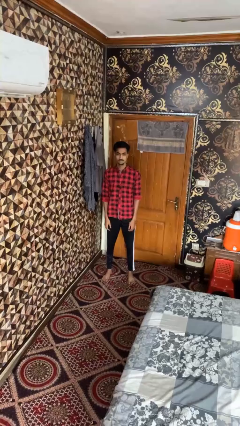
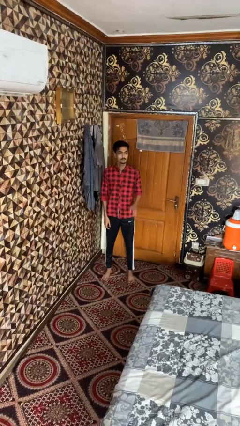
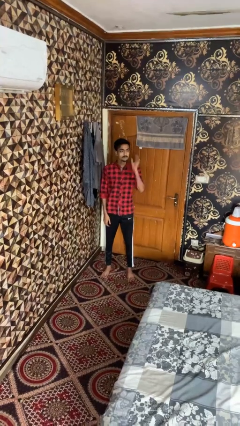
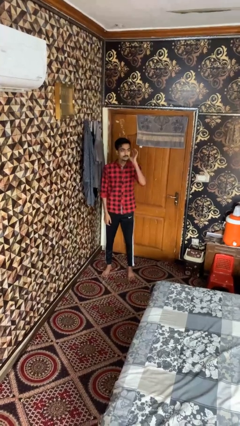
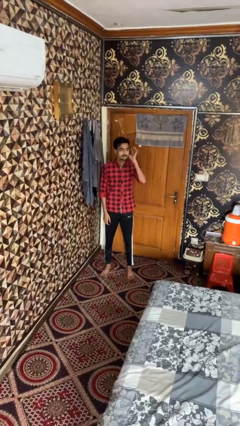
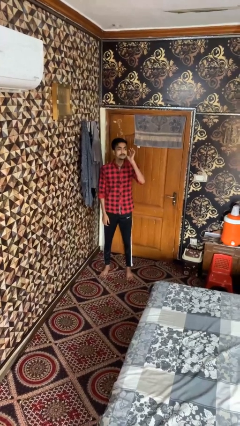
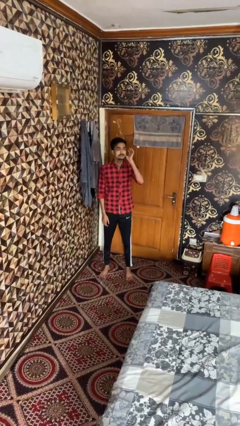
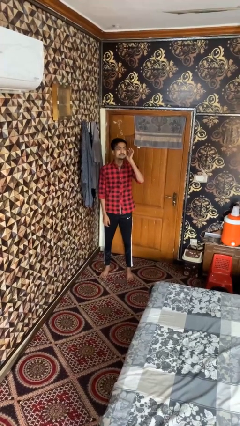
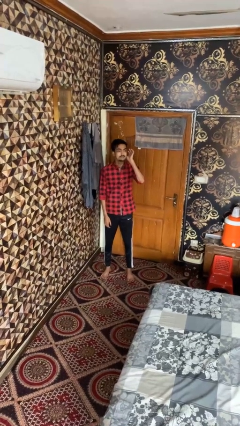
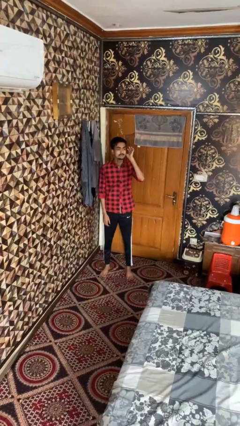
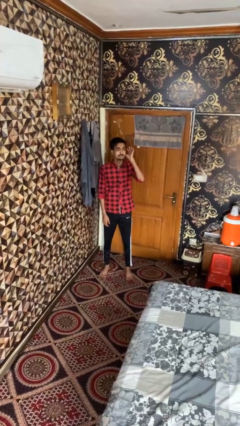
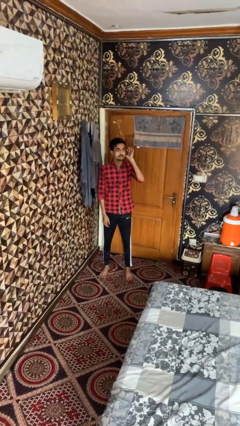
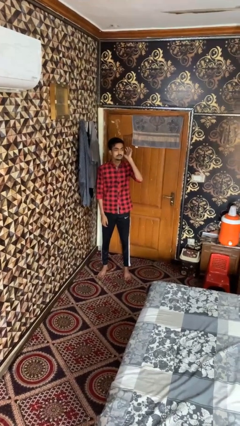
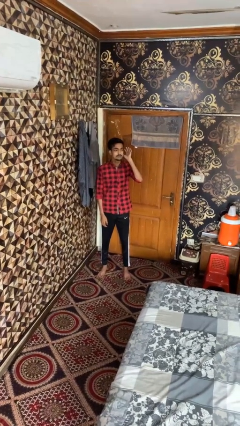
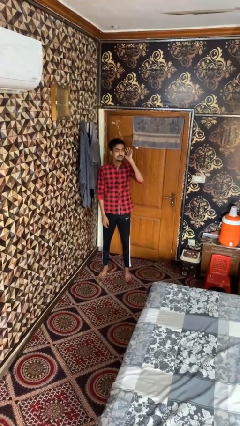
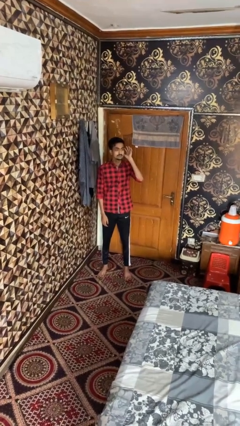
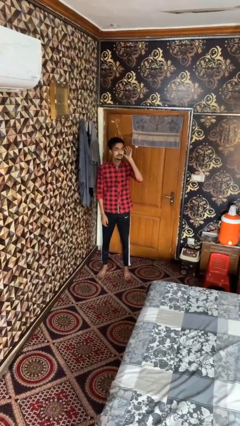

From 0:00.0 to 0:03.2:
person gestures listen closely

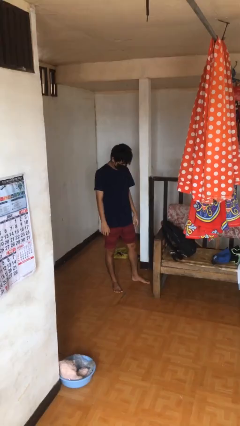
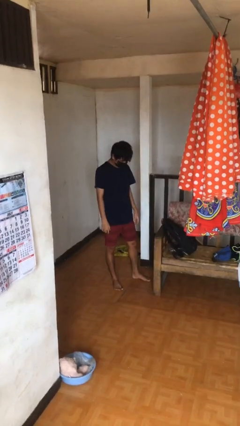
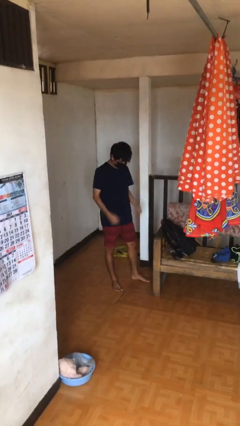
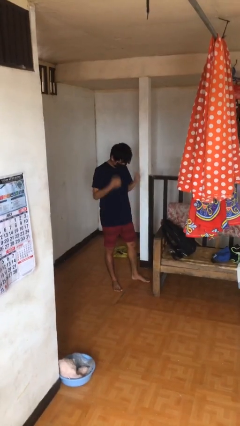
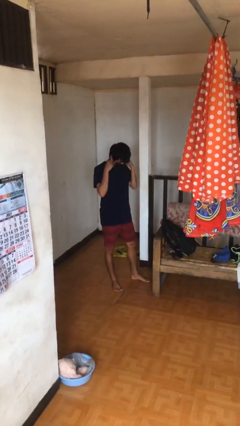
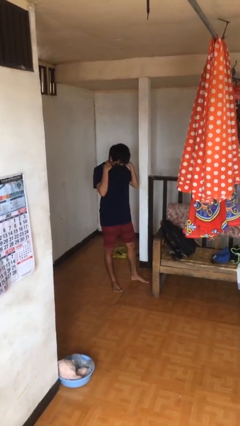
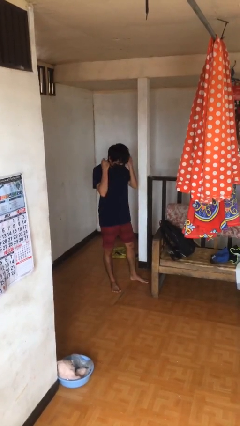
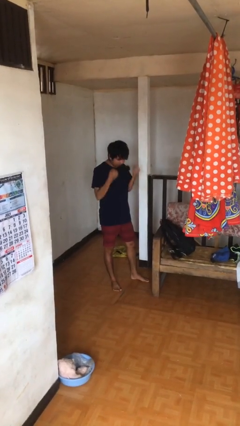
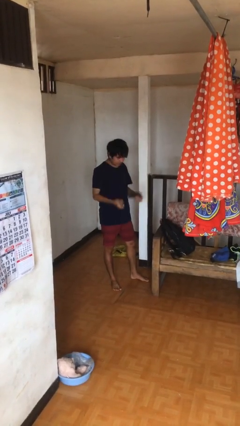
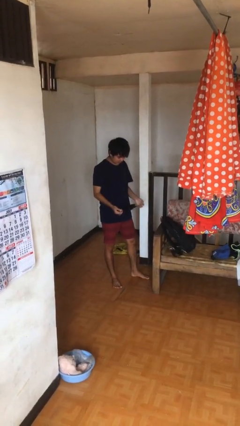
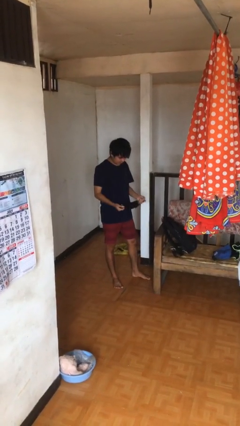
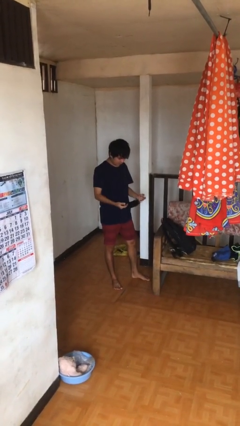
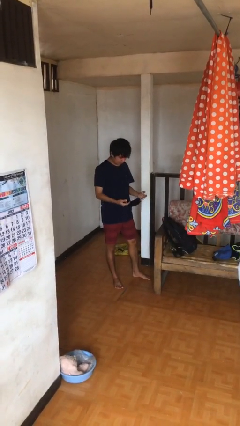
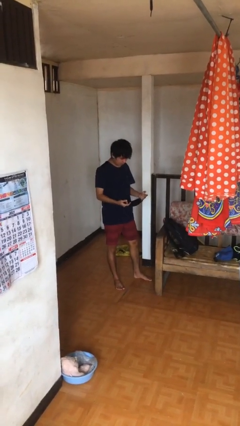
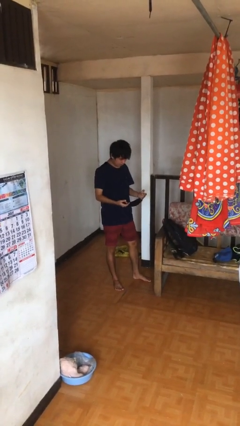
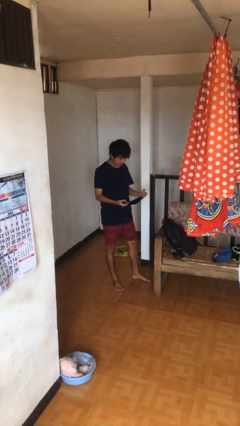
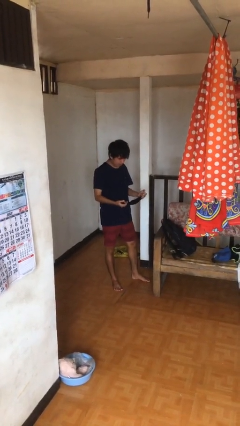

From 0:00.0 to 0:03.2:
person takes off facemask

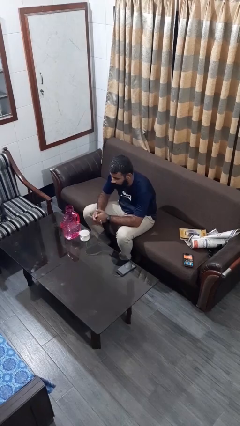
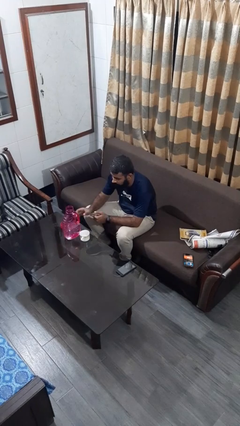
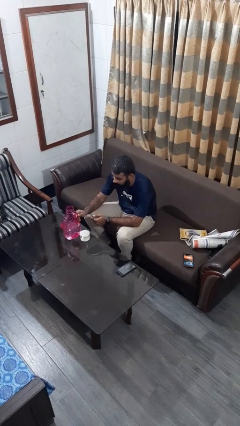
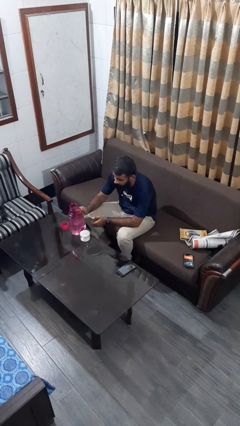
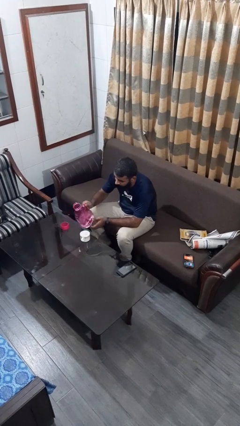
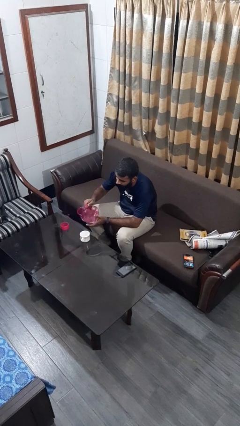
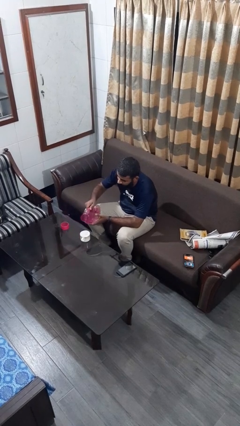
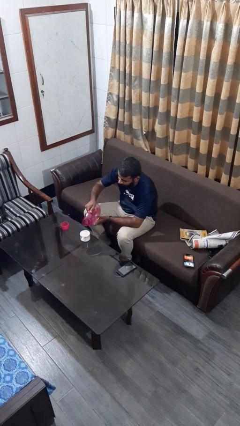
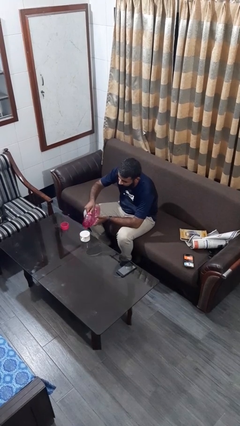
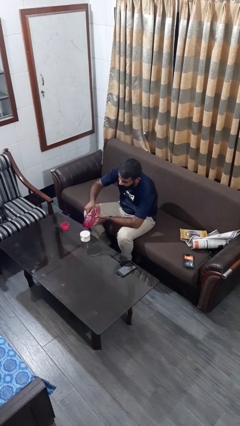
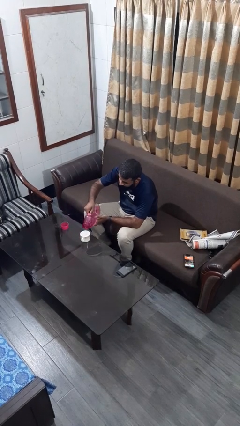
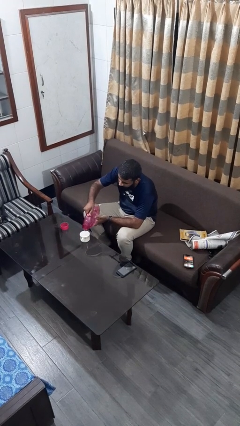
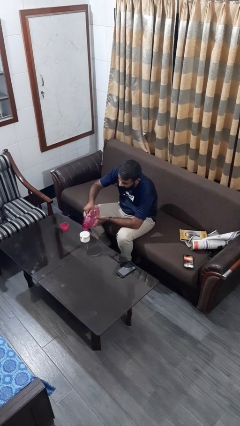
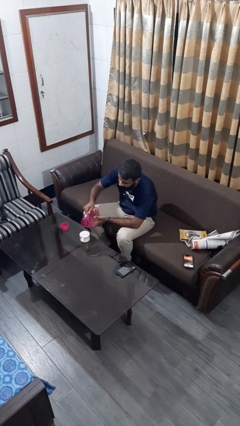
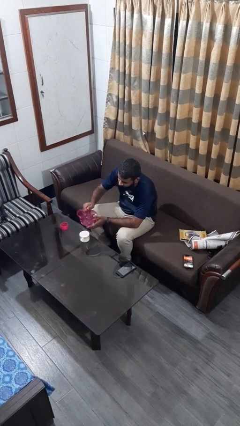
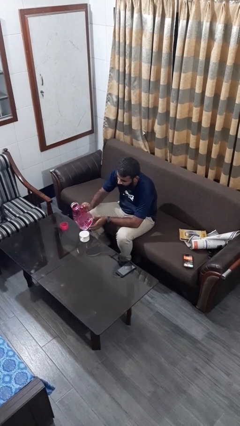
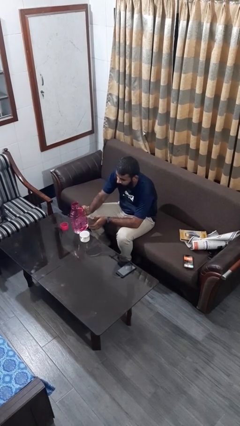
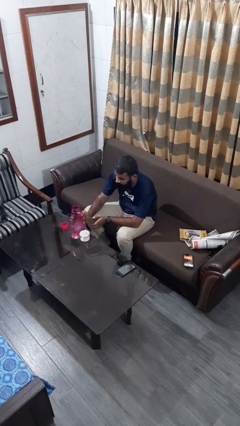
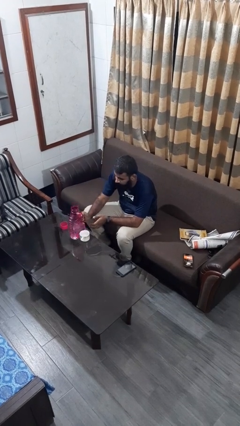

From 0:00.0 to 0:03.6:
person pours liquid into cup

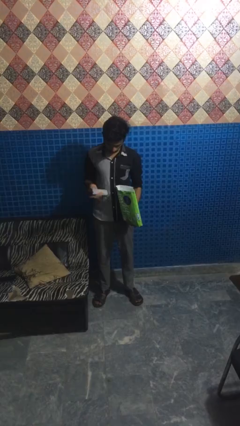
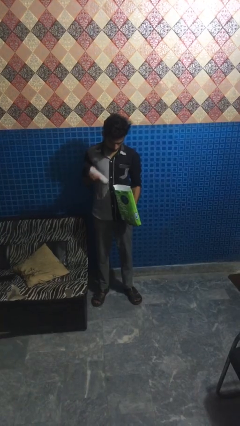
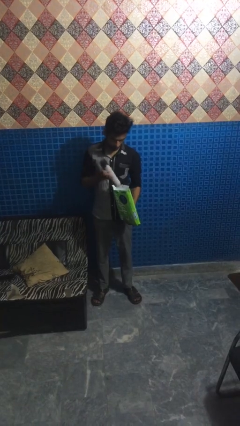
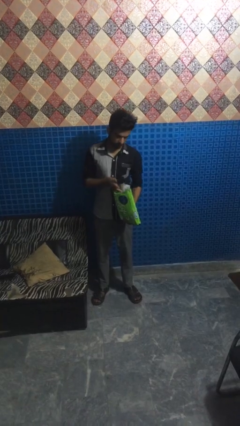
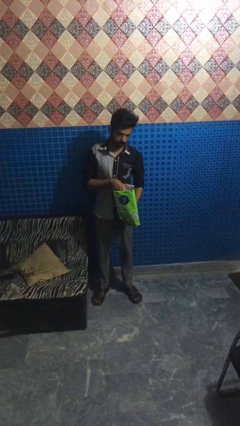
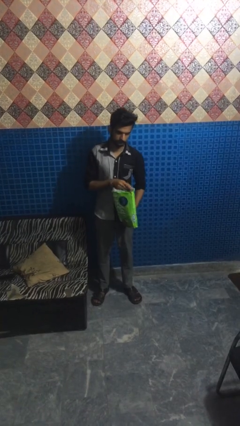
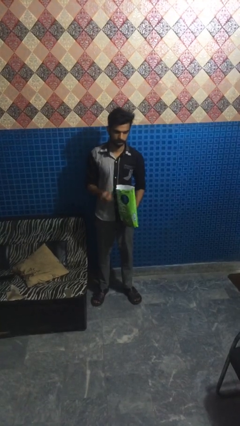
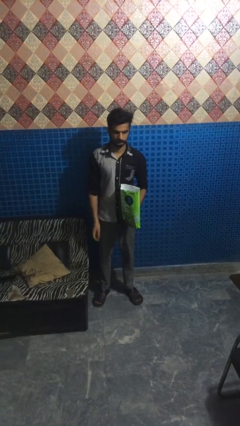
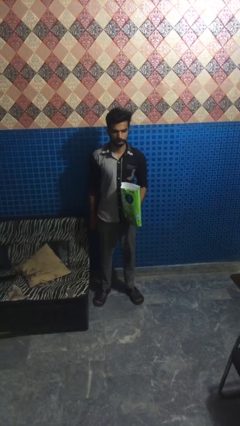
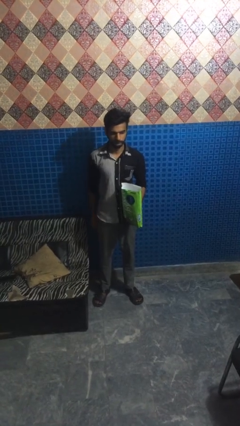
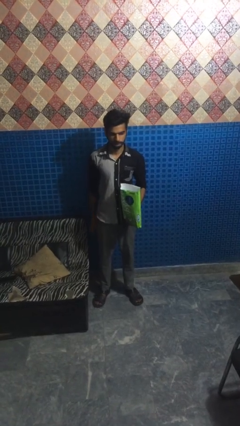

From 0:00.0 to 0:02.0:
person puts object into bag

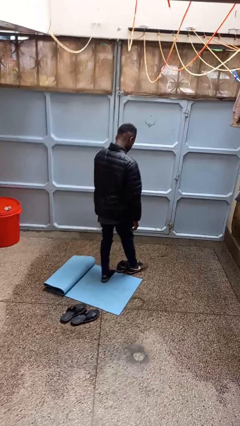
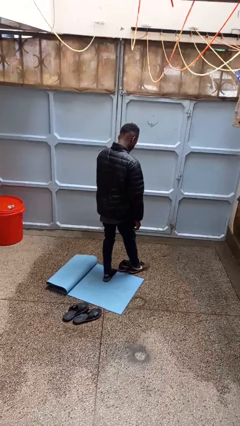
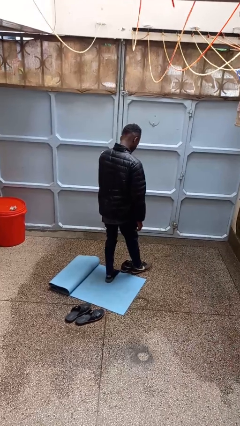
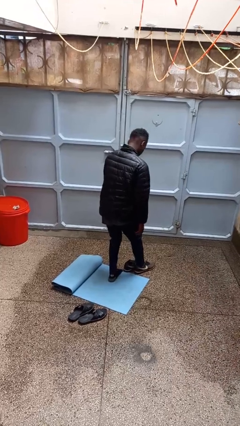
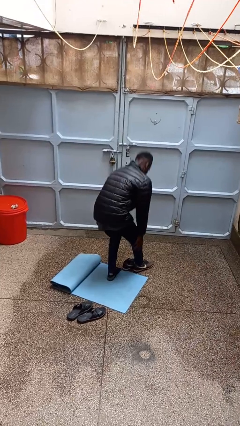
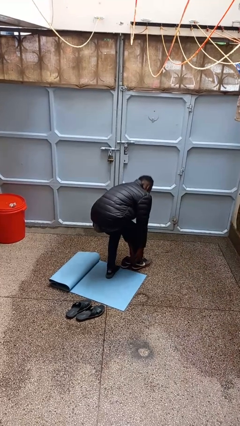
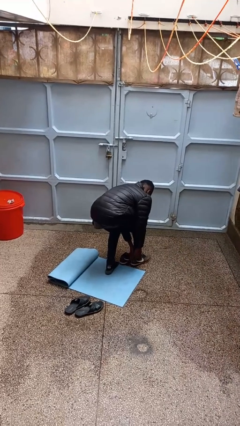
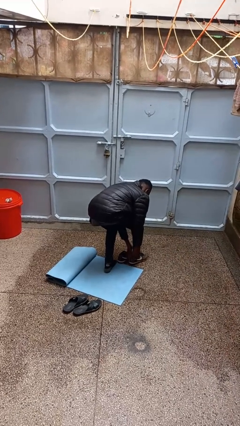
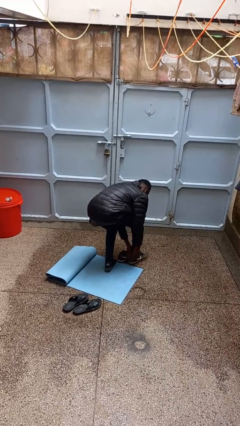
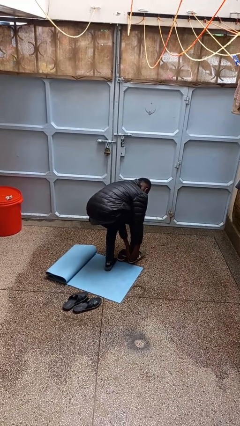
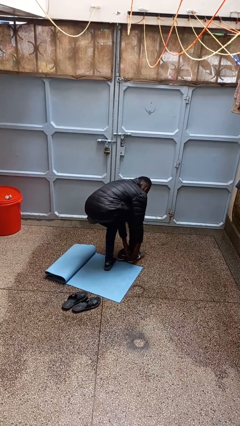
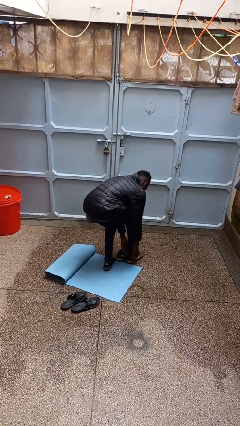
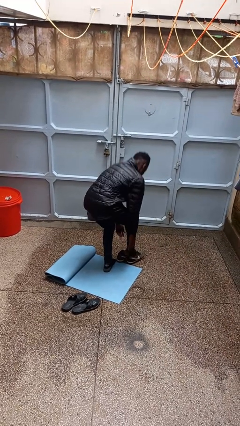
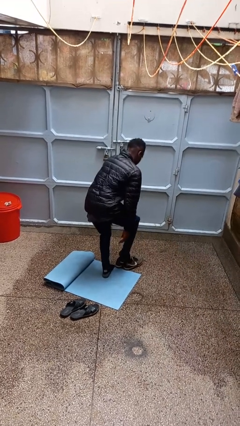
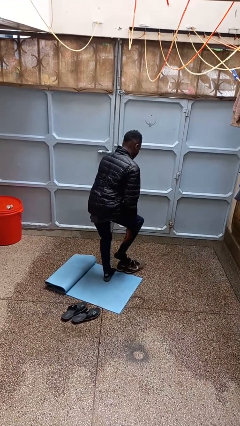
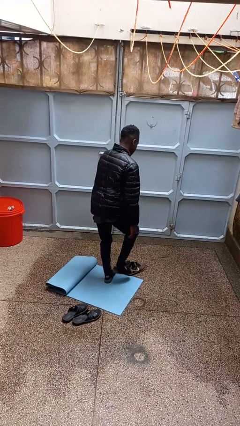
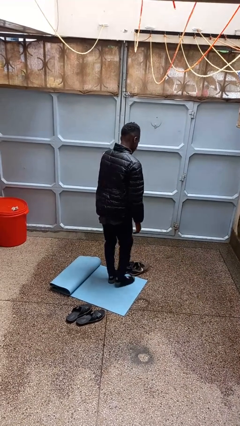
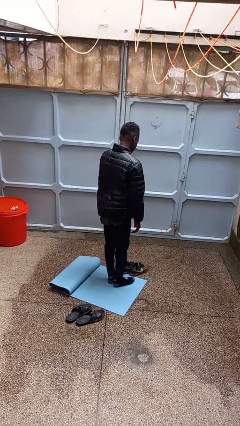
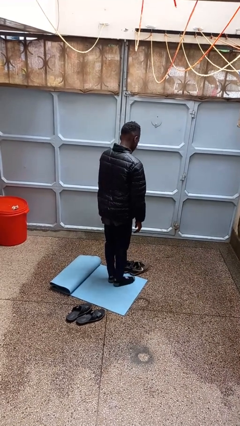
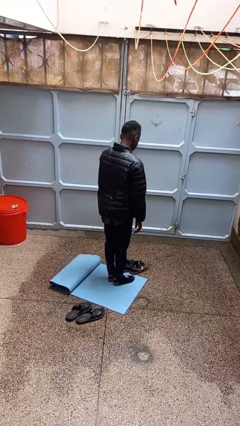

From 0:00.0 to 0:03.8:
person takes off shoes

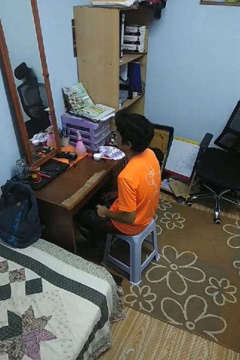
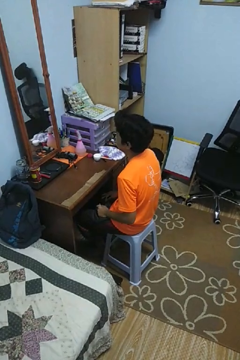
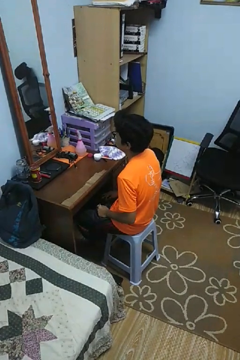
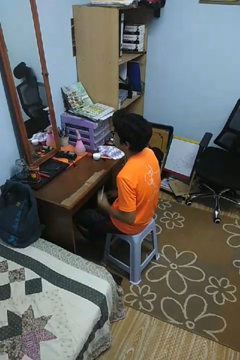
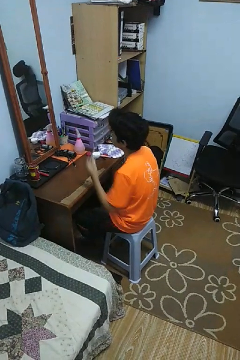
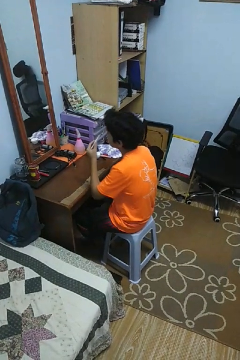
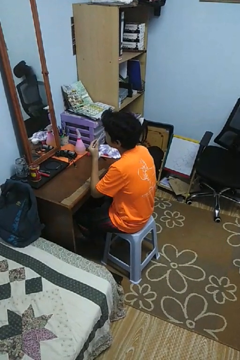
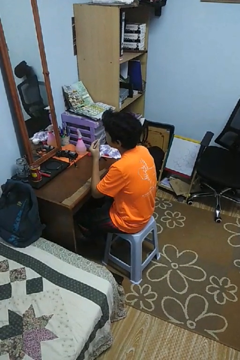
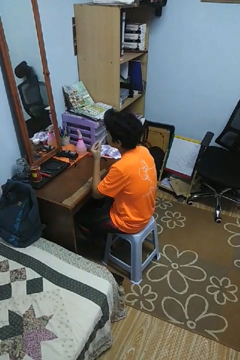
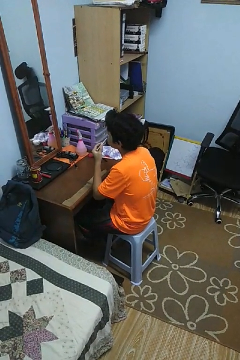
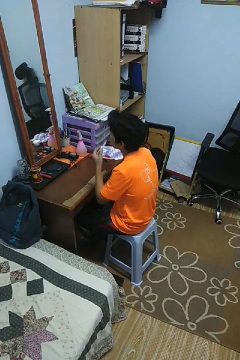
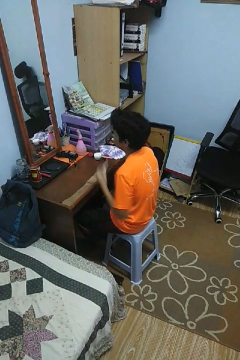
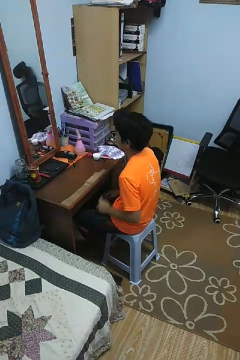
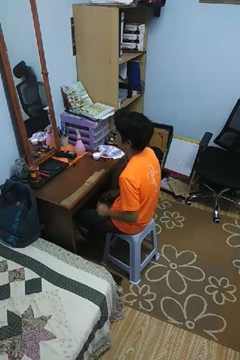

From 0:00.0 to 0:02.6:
person applies eye makeup
